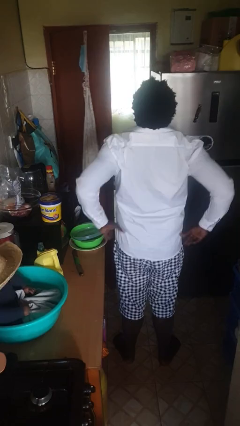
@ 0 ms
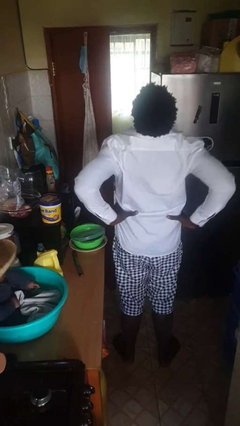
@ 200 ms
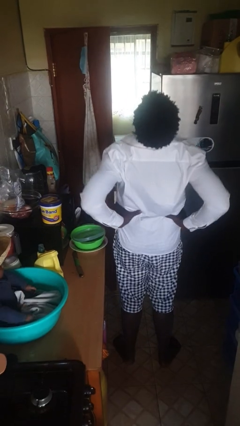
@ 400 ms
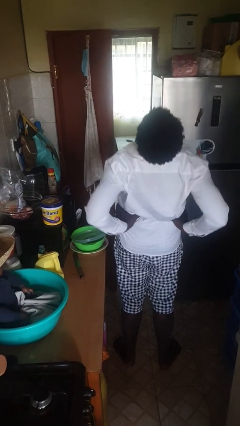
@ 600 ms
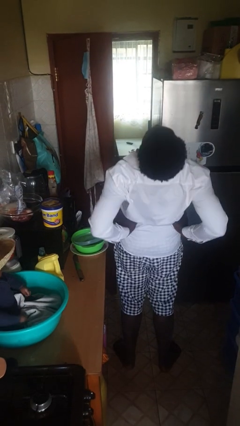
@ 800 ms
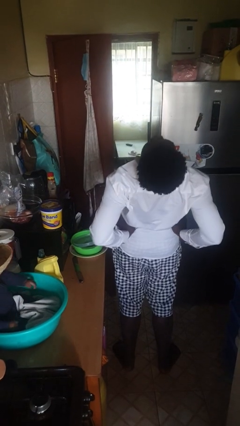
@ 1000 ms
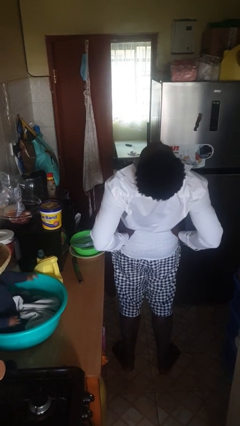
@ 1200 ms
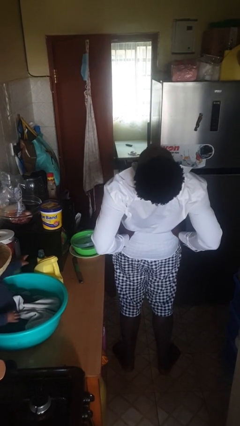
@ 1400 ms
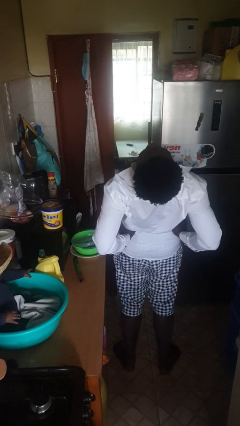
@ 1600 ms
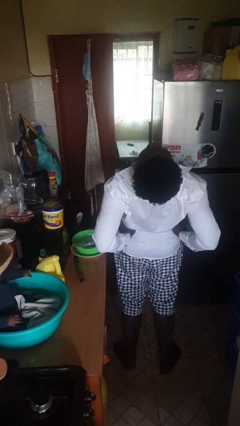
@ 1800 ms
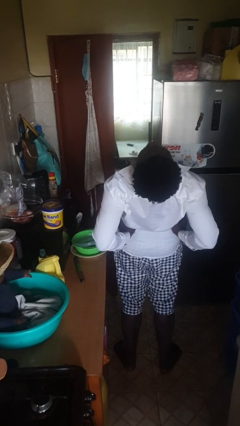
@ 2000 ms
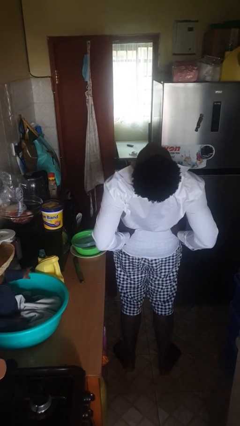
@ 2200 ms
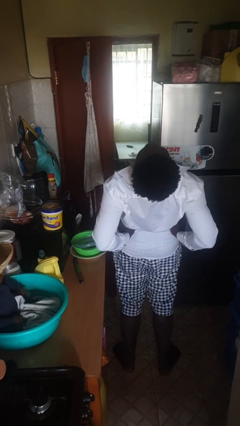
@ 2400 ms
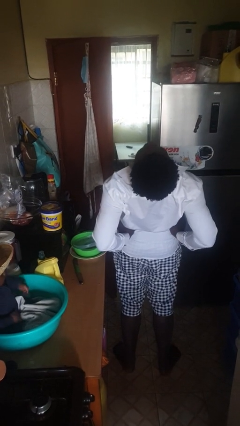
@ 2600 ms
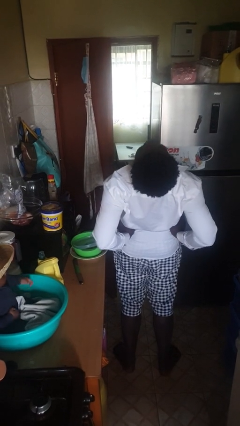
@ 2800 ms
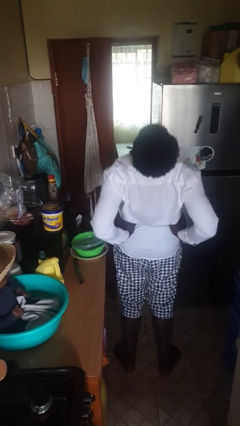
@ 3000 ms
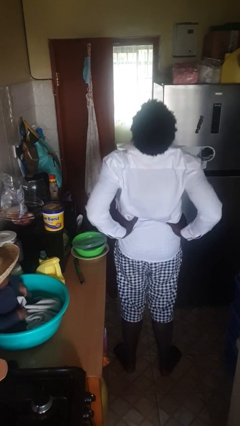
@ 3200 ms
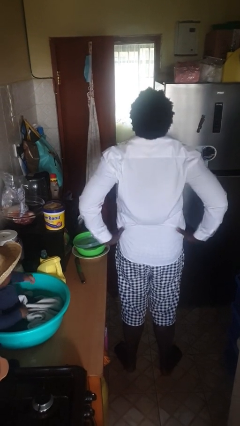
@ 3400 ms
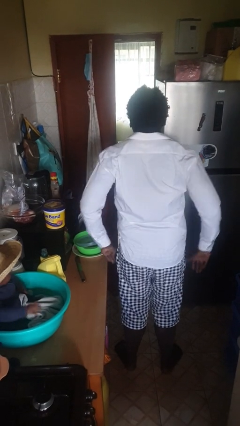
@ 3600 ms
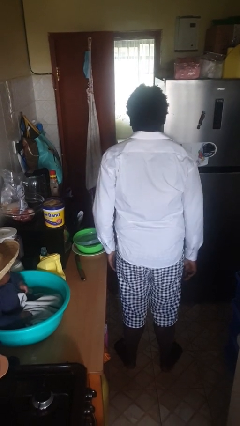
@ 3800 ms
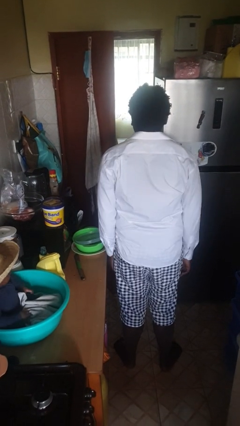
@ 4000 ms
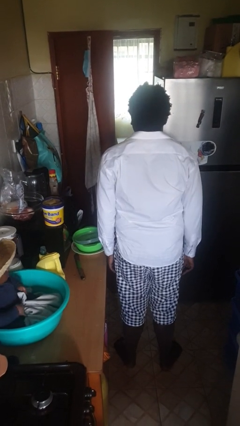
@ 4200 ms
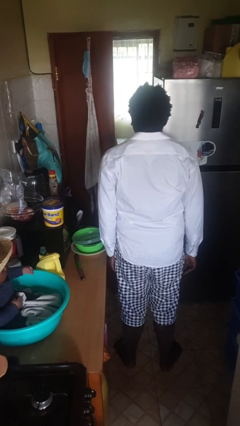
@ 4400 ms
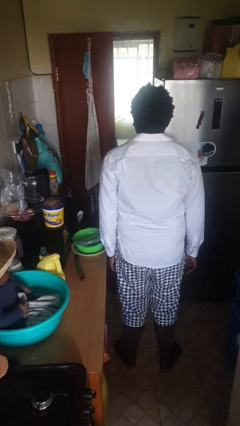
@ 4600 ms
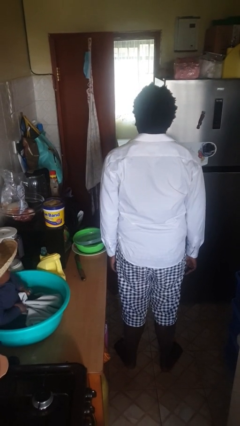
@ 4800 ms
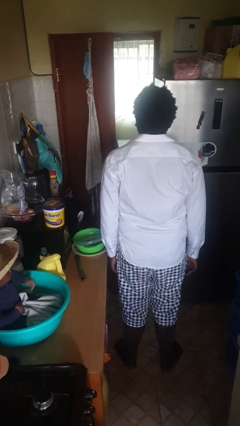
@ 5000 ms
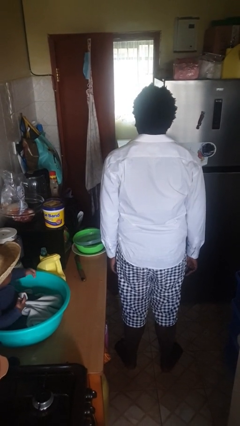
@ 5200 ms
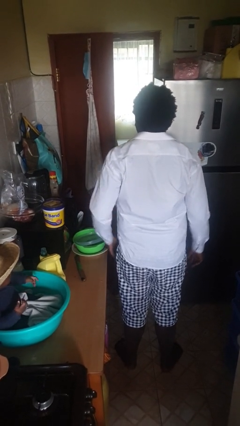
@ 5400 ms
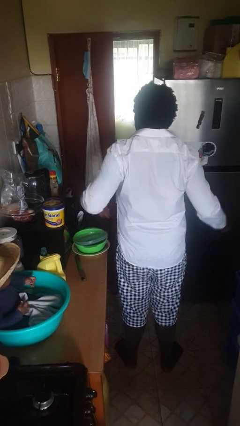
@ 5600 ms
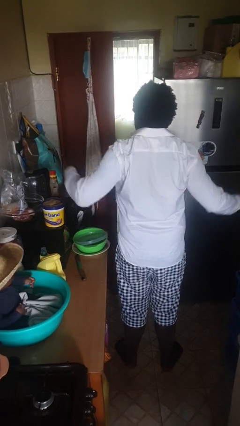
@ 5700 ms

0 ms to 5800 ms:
person stretches back

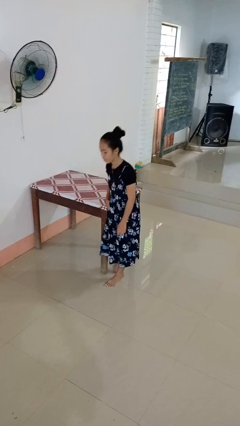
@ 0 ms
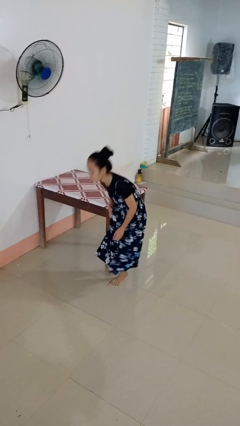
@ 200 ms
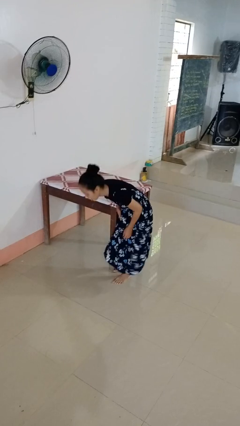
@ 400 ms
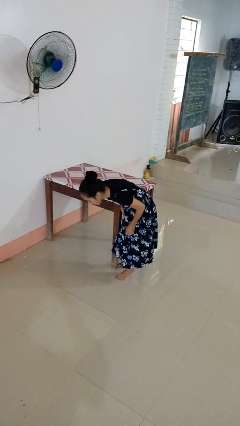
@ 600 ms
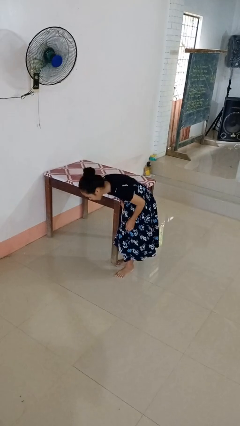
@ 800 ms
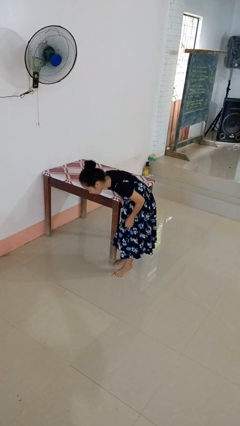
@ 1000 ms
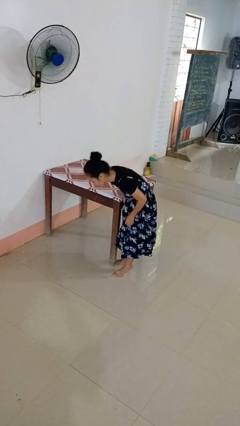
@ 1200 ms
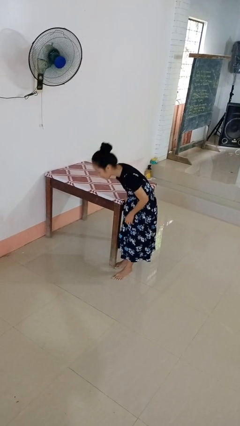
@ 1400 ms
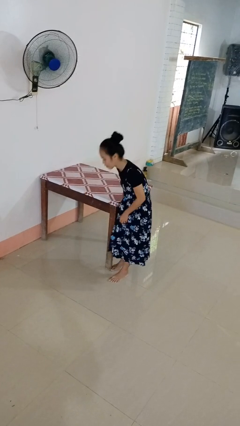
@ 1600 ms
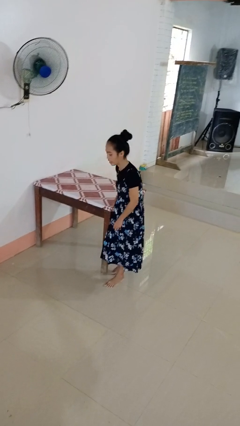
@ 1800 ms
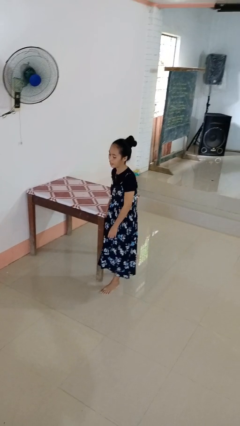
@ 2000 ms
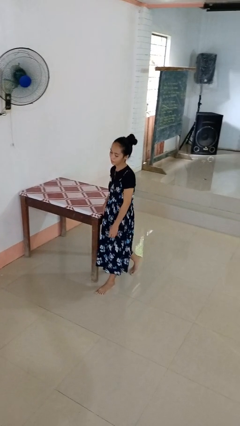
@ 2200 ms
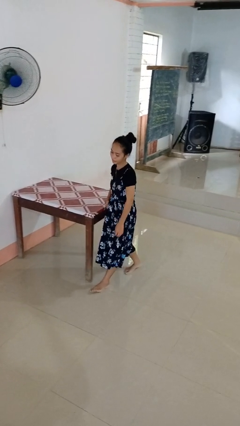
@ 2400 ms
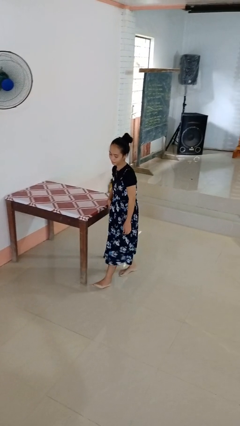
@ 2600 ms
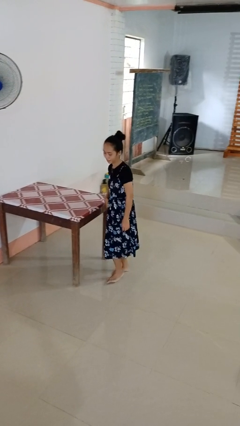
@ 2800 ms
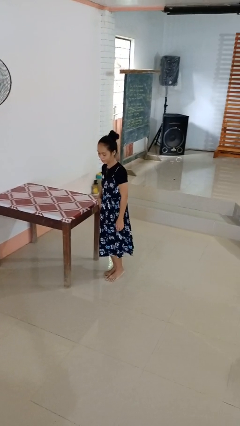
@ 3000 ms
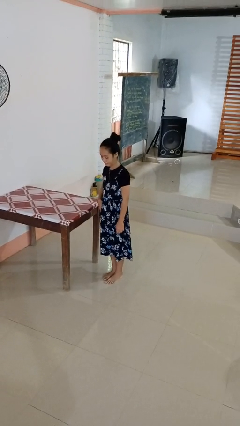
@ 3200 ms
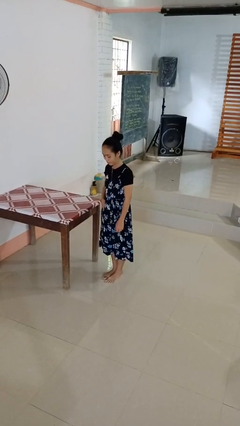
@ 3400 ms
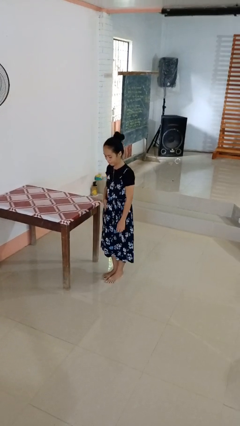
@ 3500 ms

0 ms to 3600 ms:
person stubs toe

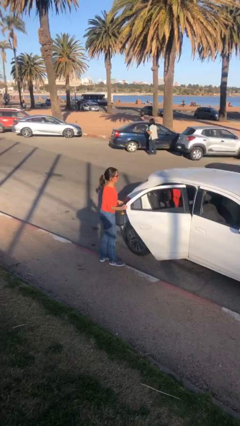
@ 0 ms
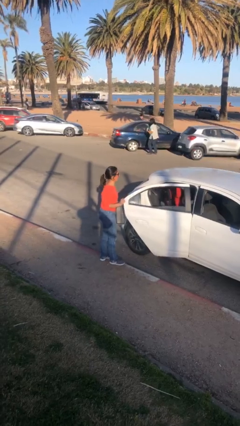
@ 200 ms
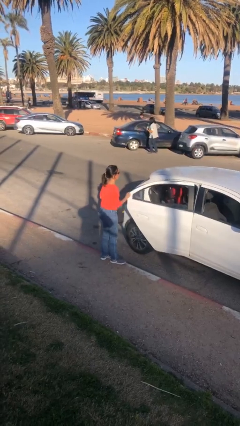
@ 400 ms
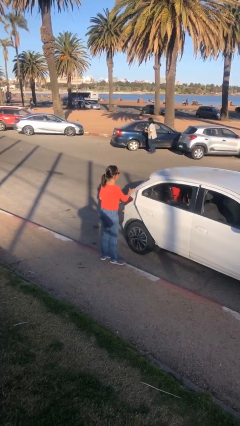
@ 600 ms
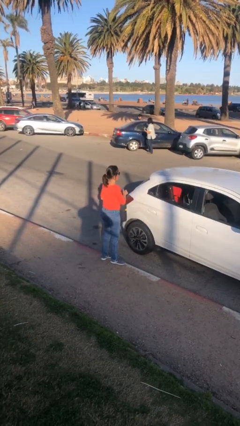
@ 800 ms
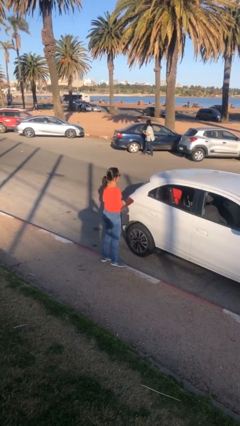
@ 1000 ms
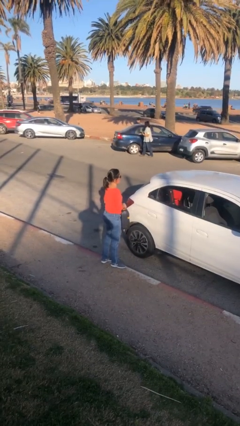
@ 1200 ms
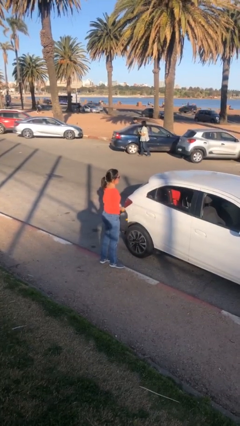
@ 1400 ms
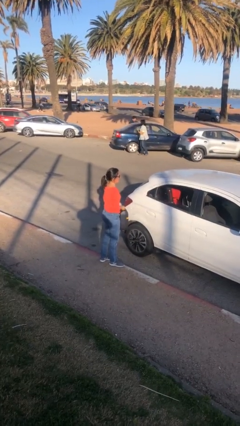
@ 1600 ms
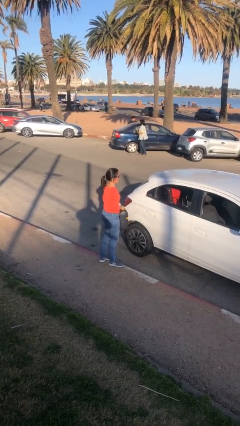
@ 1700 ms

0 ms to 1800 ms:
person closes car door

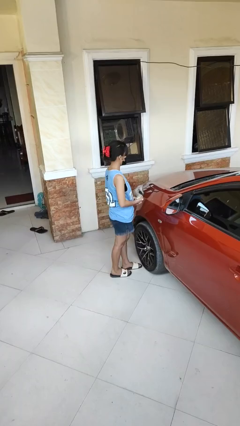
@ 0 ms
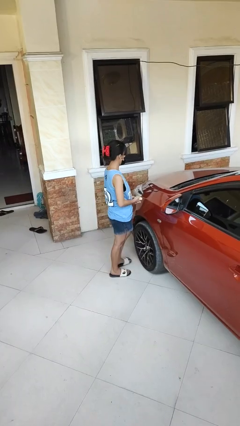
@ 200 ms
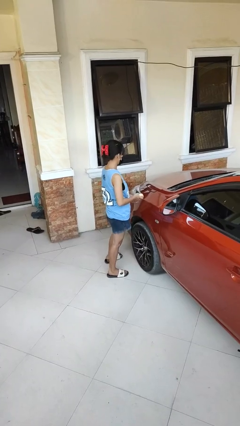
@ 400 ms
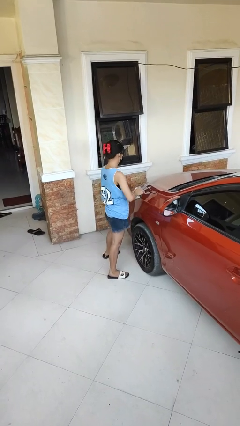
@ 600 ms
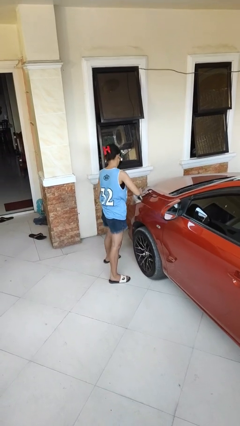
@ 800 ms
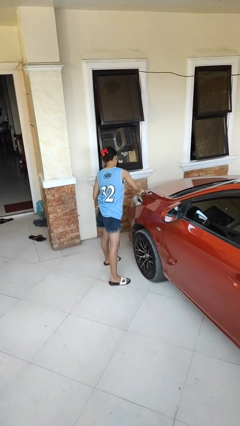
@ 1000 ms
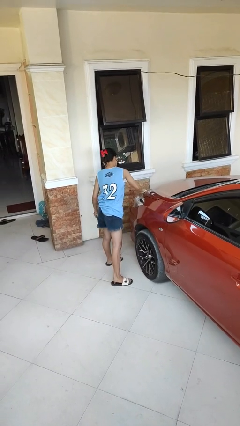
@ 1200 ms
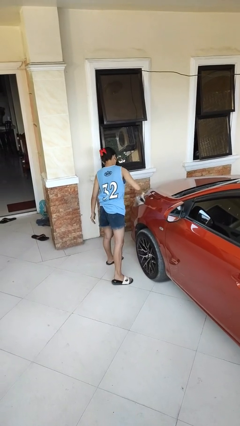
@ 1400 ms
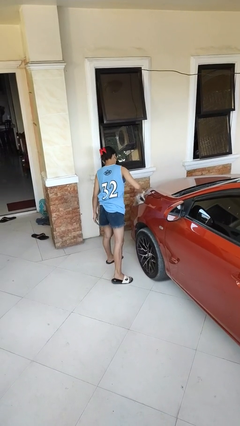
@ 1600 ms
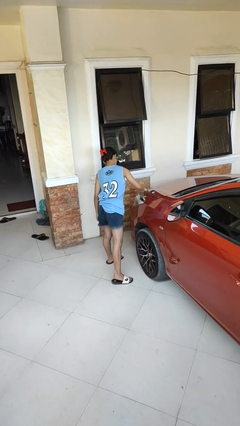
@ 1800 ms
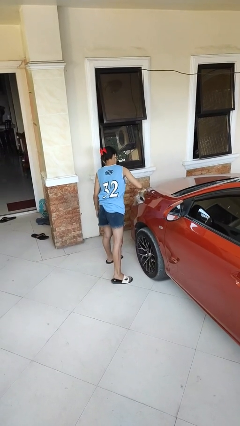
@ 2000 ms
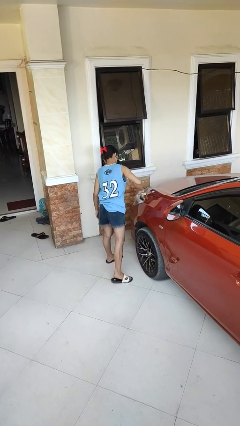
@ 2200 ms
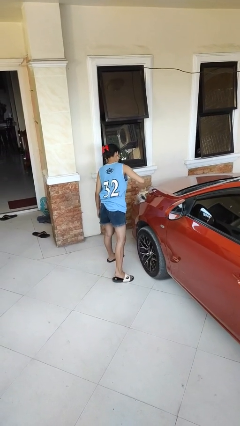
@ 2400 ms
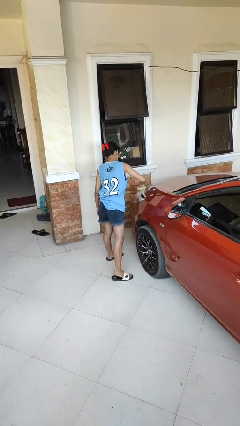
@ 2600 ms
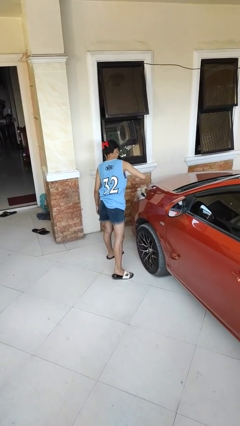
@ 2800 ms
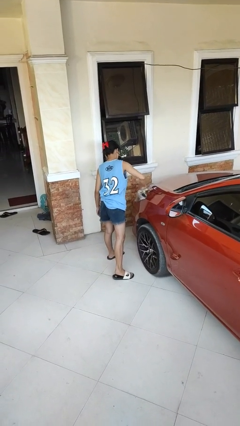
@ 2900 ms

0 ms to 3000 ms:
person polishes car with rag

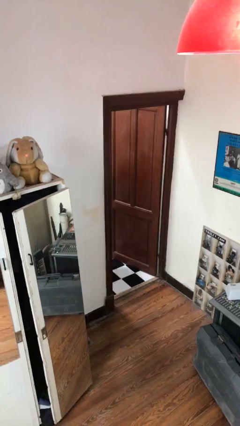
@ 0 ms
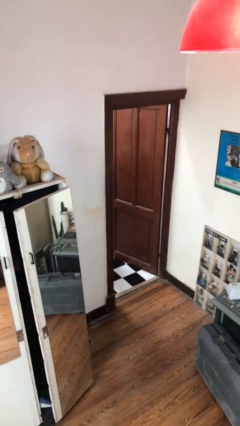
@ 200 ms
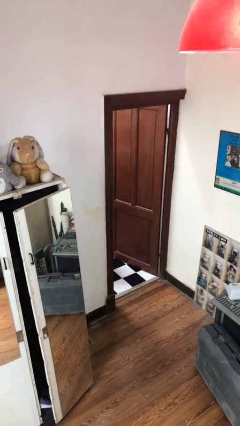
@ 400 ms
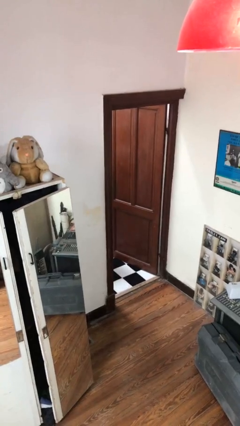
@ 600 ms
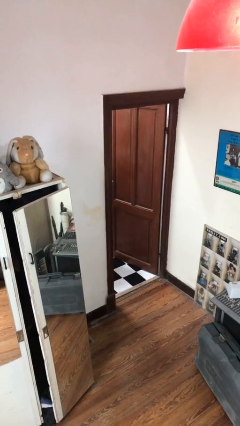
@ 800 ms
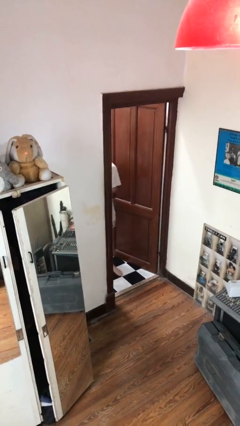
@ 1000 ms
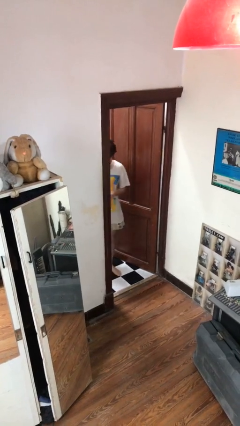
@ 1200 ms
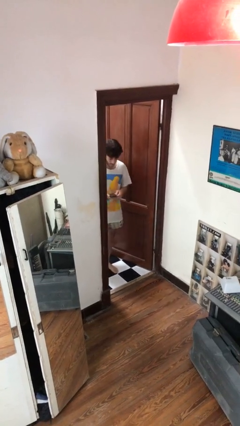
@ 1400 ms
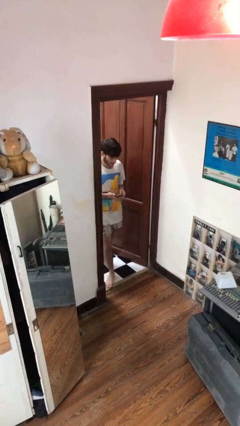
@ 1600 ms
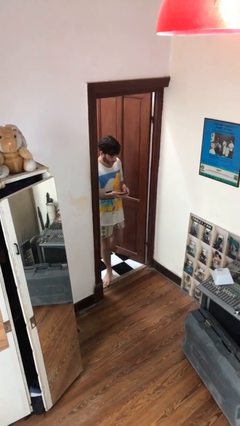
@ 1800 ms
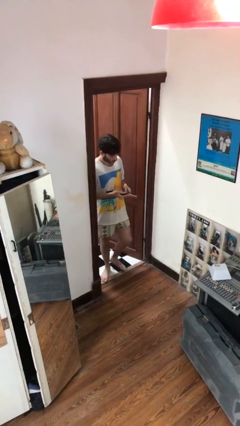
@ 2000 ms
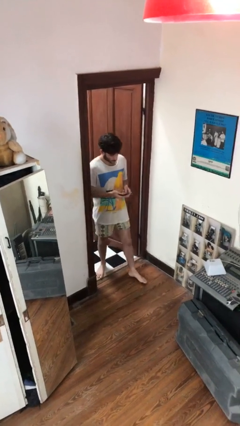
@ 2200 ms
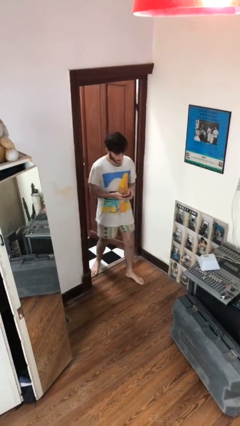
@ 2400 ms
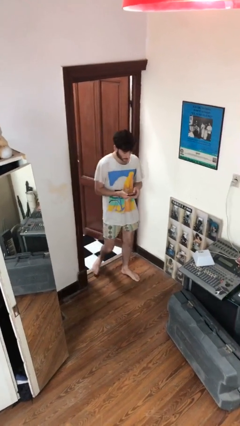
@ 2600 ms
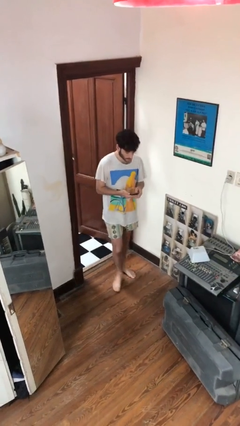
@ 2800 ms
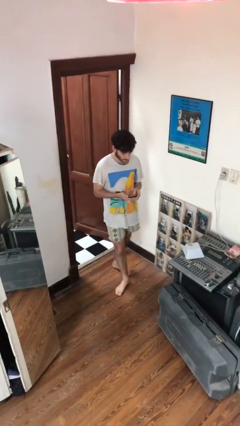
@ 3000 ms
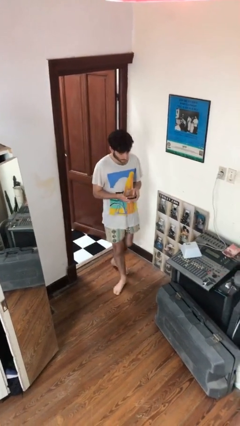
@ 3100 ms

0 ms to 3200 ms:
person enters scene through structure

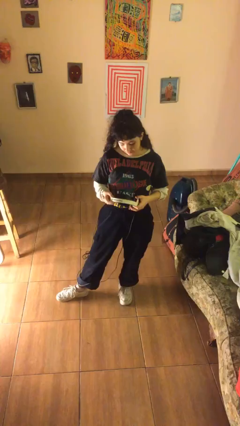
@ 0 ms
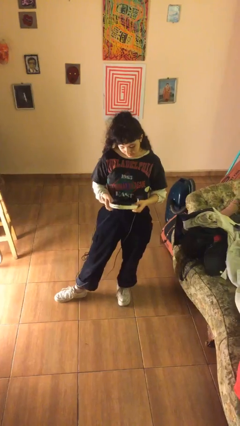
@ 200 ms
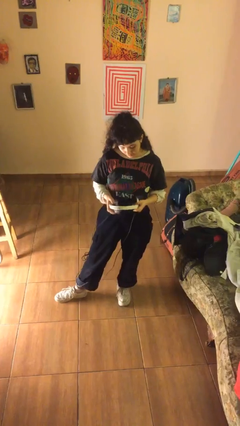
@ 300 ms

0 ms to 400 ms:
person puts on headphones
